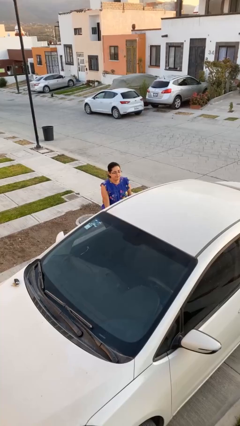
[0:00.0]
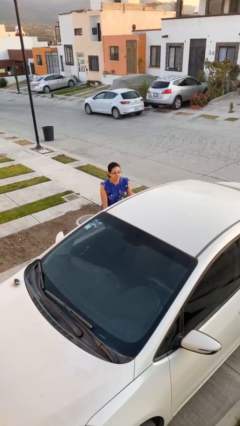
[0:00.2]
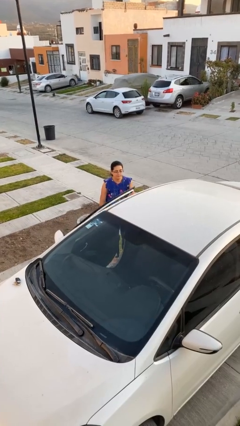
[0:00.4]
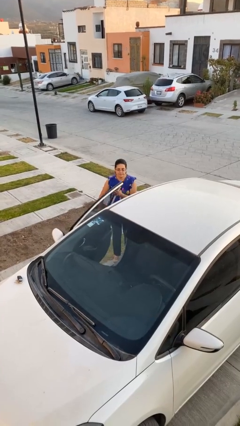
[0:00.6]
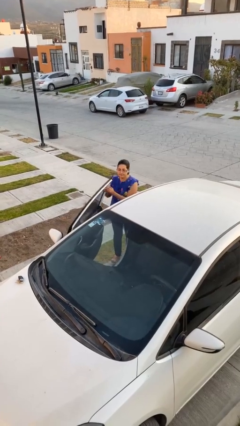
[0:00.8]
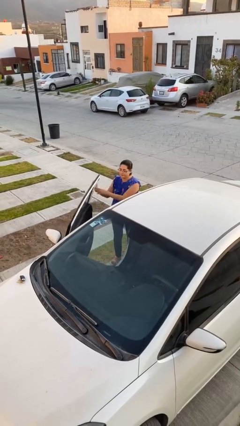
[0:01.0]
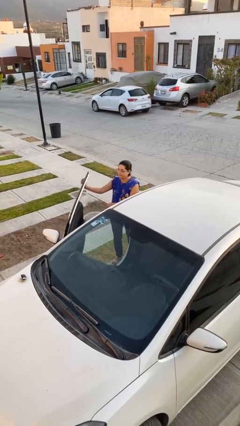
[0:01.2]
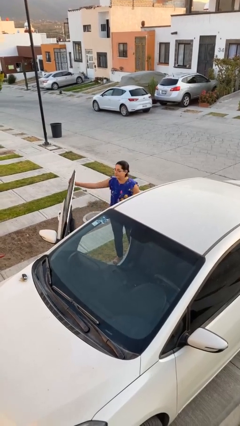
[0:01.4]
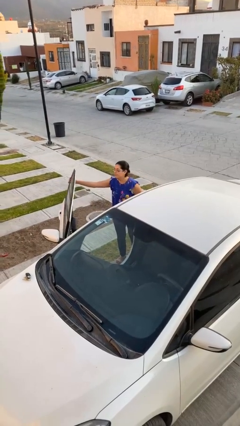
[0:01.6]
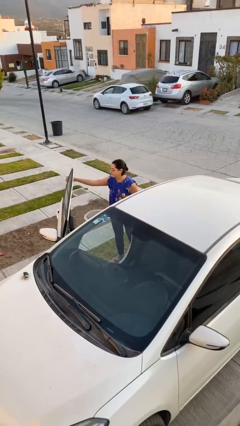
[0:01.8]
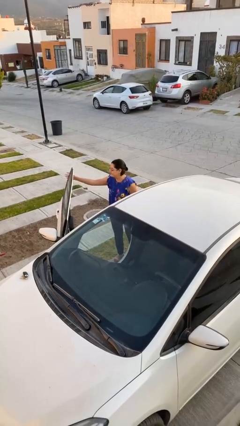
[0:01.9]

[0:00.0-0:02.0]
person opens car door

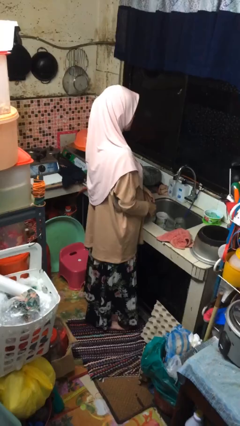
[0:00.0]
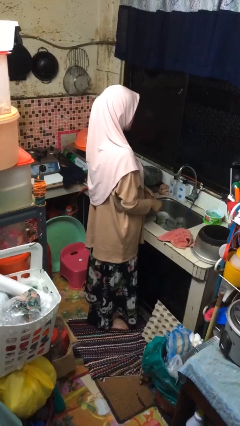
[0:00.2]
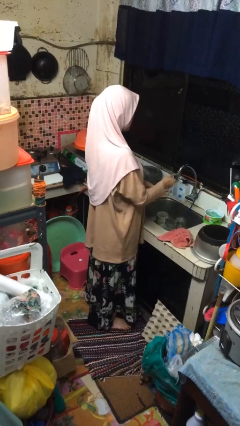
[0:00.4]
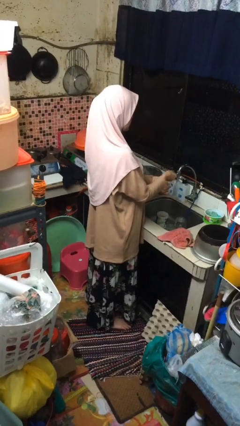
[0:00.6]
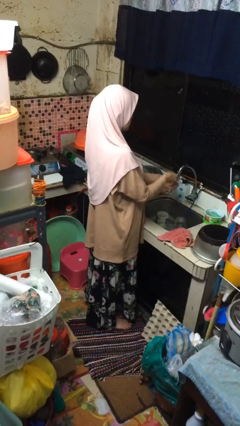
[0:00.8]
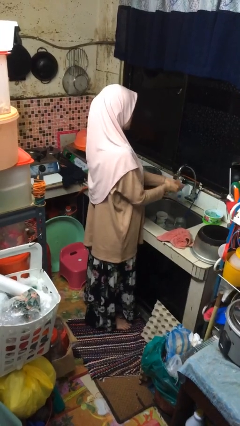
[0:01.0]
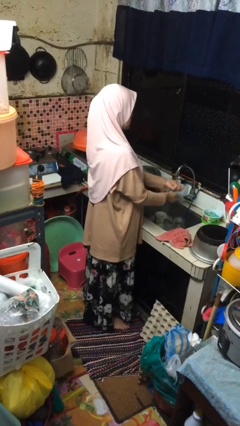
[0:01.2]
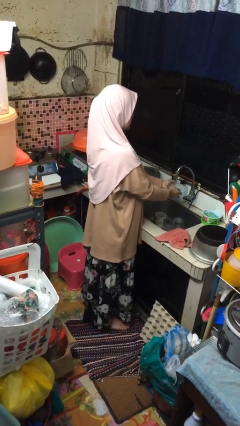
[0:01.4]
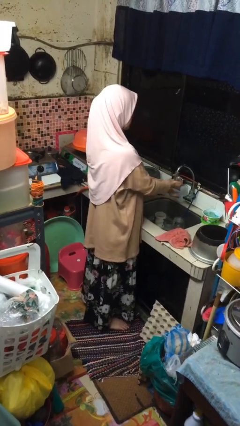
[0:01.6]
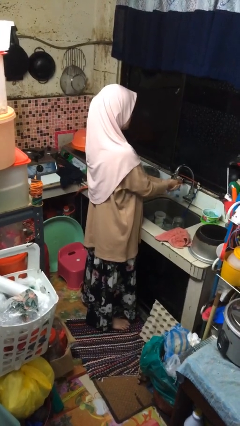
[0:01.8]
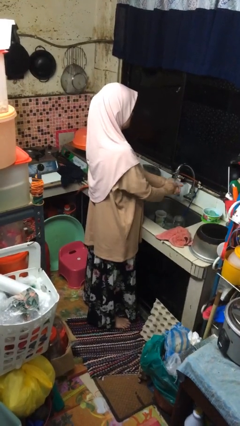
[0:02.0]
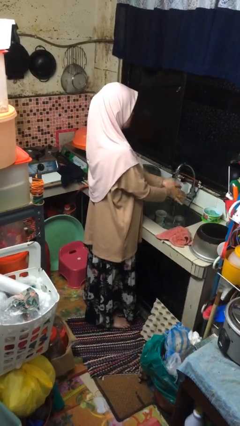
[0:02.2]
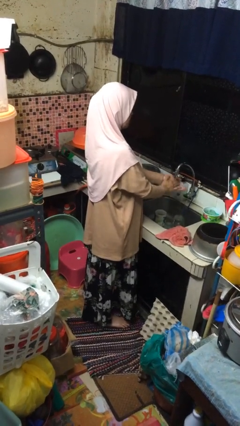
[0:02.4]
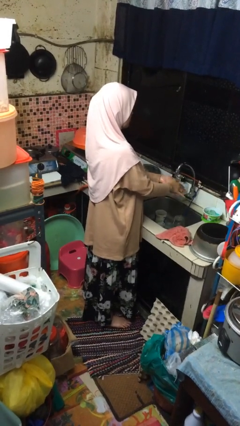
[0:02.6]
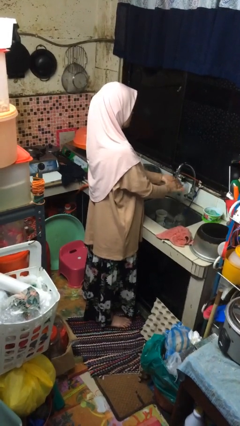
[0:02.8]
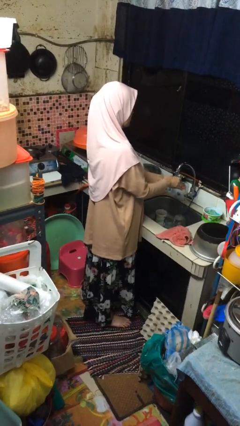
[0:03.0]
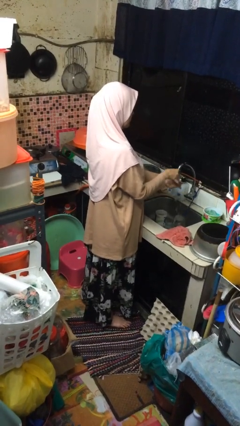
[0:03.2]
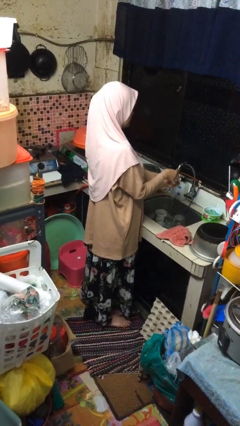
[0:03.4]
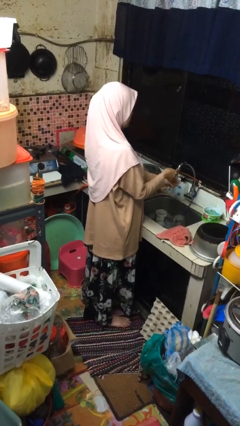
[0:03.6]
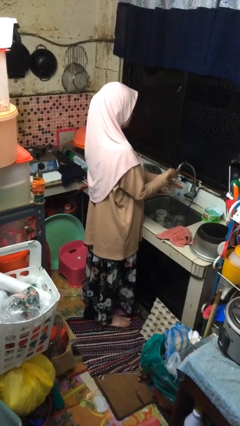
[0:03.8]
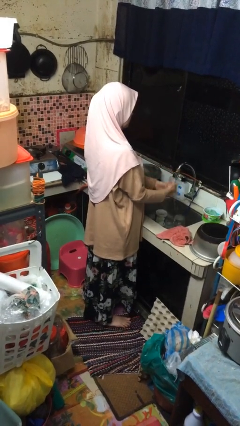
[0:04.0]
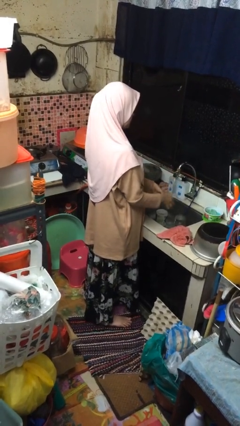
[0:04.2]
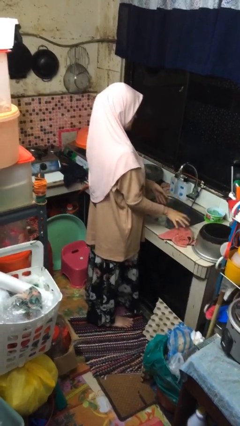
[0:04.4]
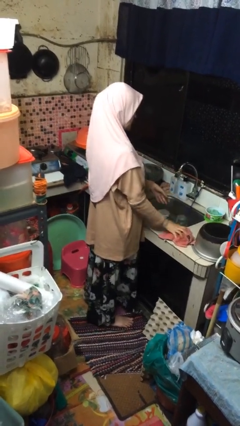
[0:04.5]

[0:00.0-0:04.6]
person washes hands

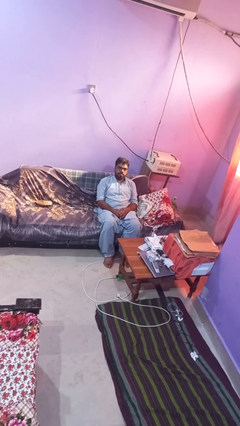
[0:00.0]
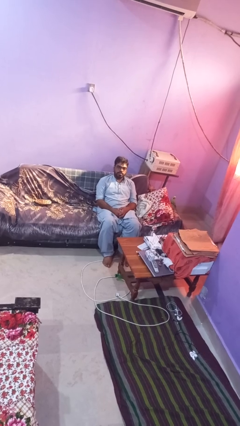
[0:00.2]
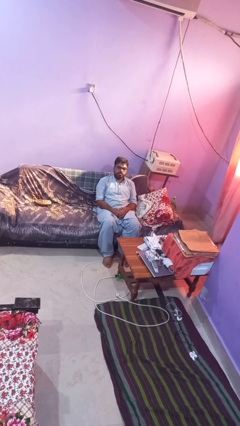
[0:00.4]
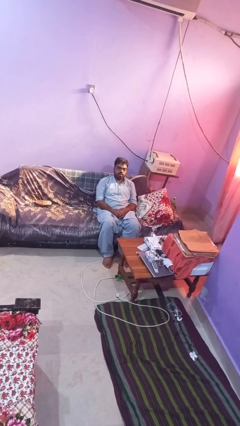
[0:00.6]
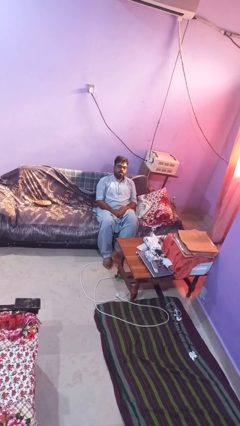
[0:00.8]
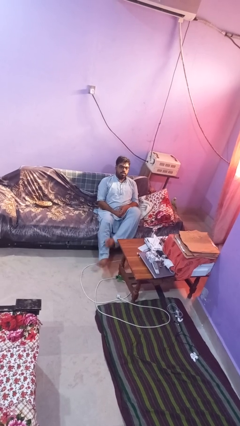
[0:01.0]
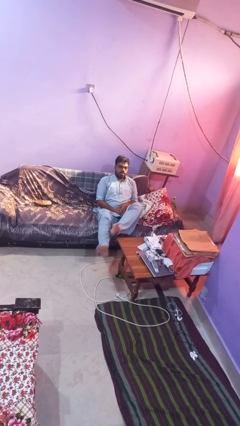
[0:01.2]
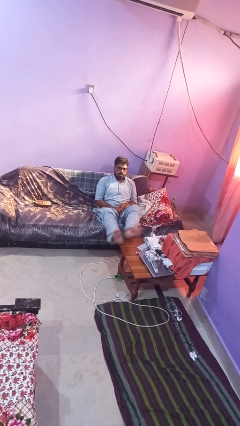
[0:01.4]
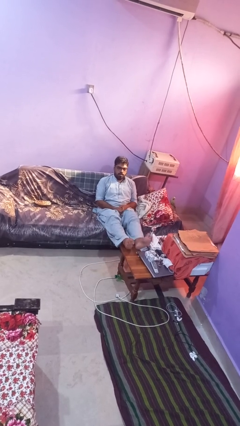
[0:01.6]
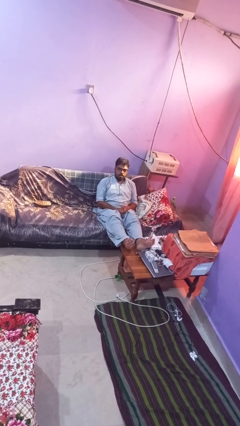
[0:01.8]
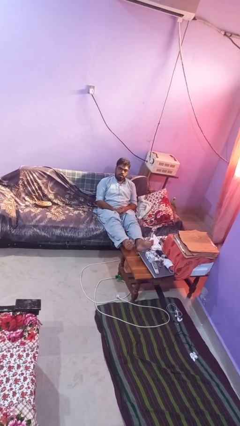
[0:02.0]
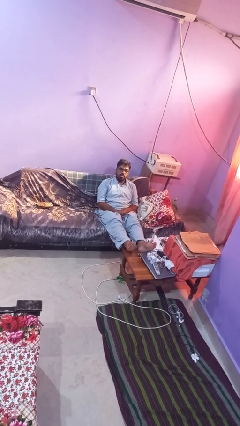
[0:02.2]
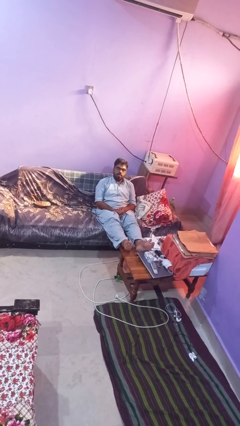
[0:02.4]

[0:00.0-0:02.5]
person puts feet up

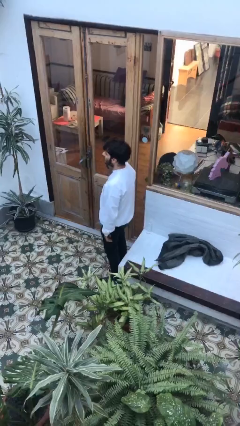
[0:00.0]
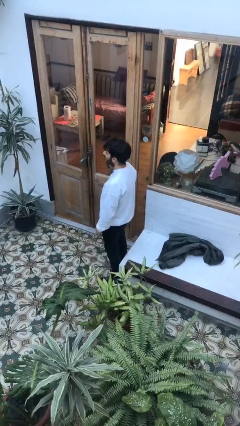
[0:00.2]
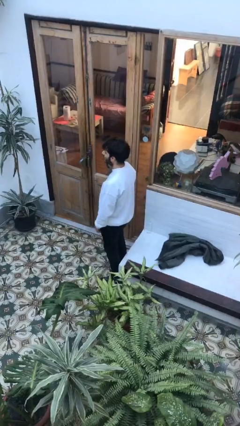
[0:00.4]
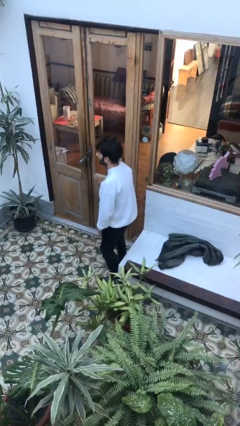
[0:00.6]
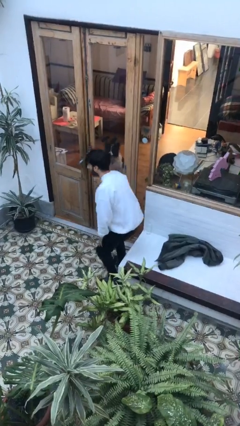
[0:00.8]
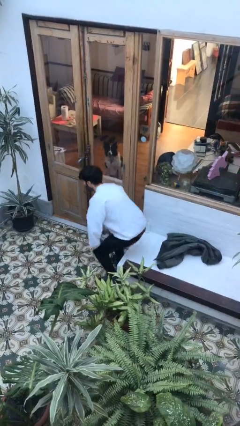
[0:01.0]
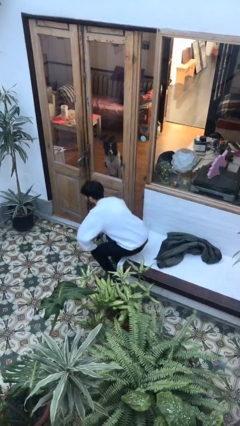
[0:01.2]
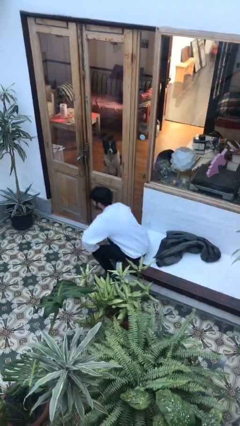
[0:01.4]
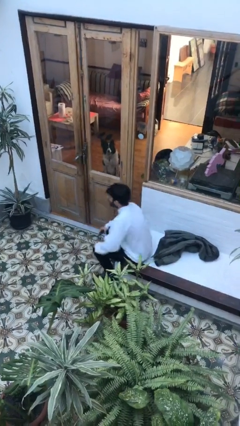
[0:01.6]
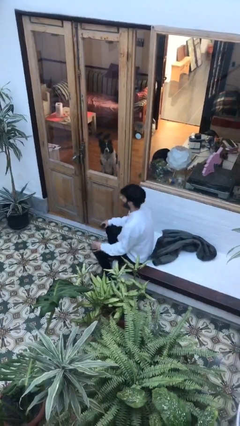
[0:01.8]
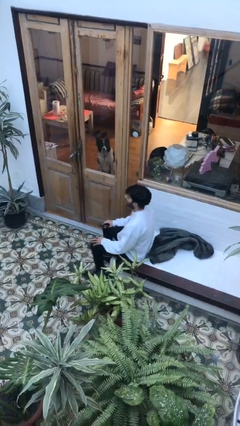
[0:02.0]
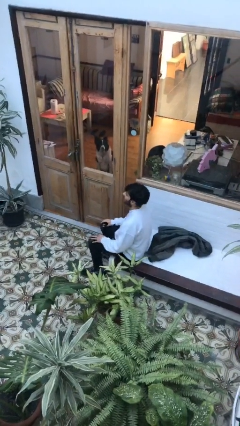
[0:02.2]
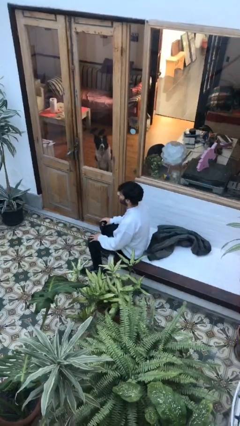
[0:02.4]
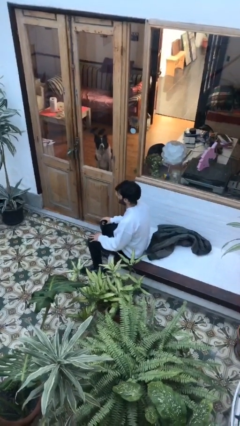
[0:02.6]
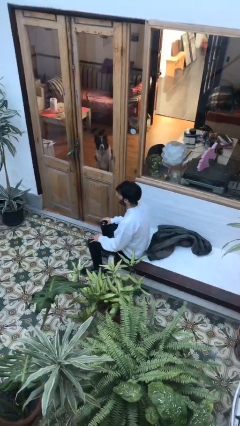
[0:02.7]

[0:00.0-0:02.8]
person sits down

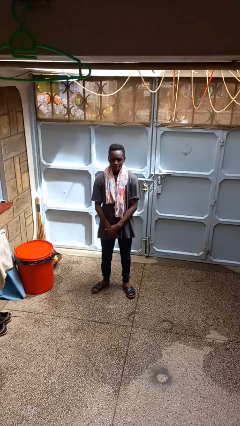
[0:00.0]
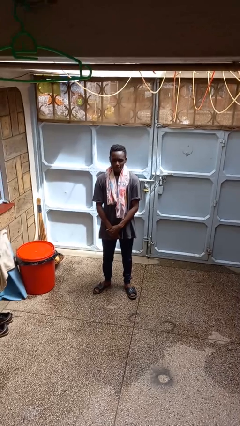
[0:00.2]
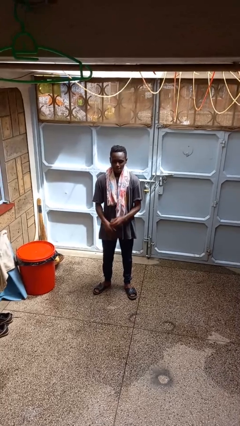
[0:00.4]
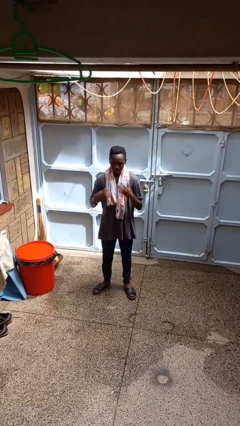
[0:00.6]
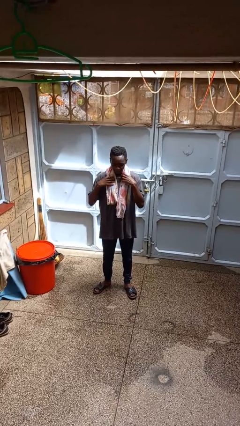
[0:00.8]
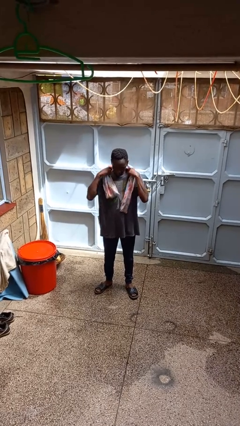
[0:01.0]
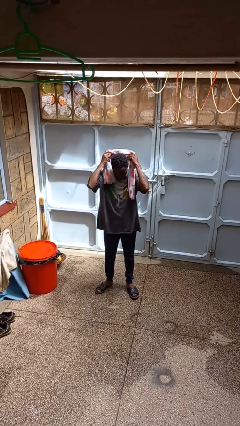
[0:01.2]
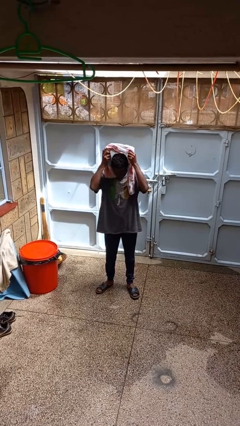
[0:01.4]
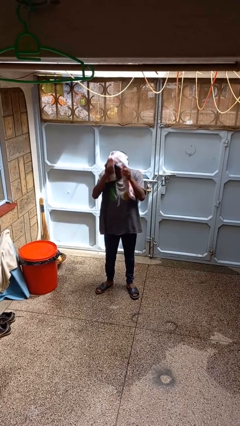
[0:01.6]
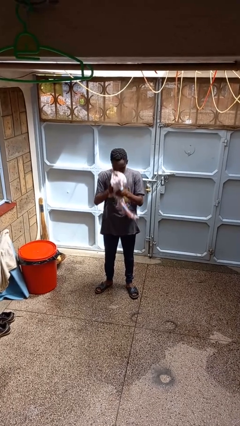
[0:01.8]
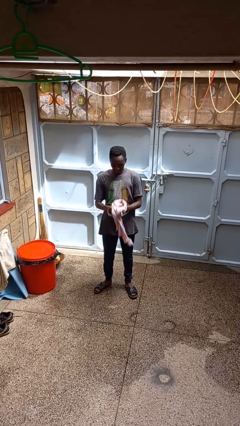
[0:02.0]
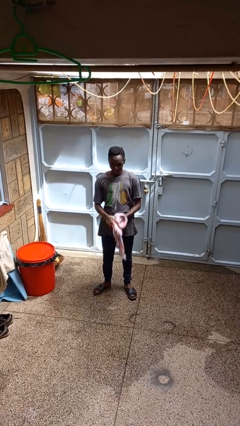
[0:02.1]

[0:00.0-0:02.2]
person takes off scarf

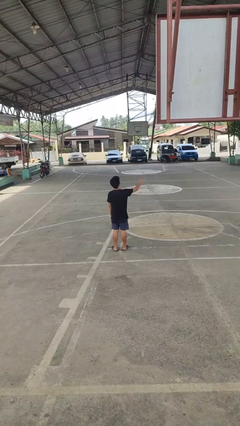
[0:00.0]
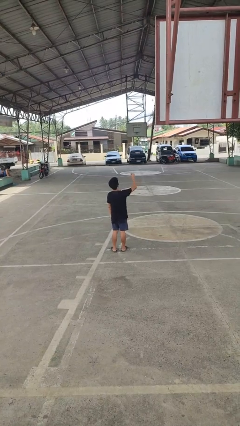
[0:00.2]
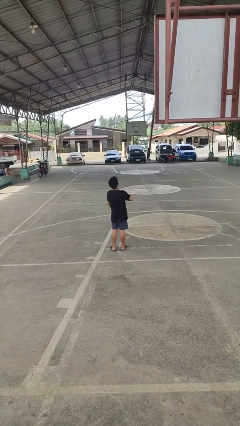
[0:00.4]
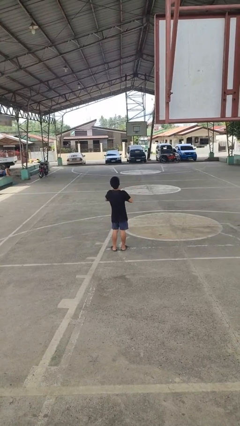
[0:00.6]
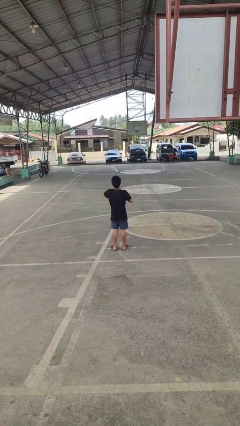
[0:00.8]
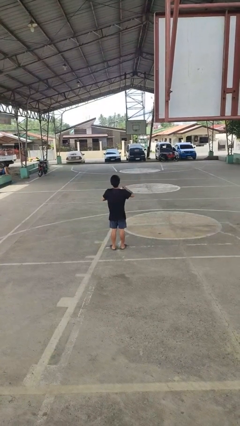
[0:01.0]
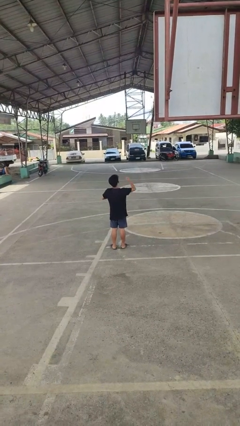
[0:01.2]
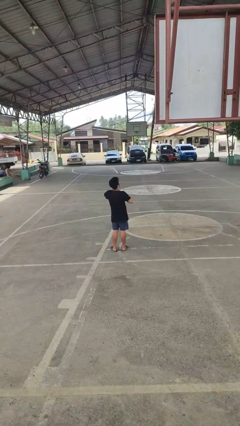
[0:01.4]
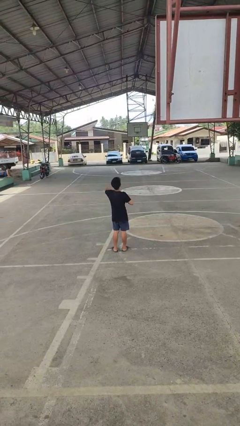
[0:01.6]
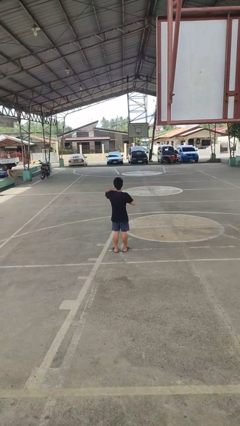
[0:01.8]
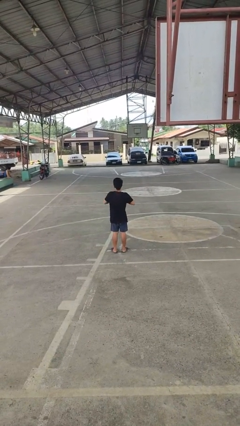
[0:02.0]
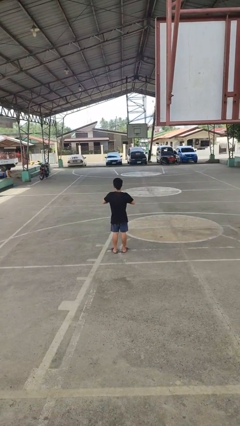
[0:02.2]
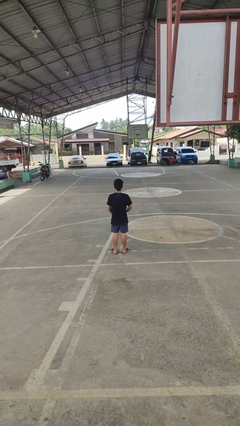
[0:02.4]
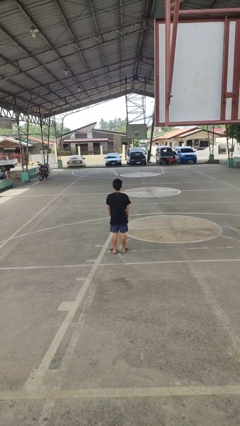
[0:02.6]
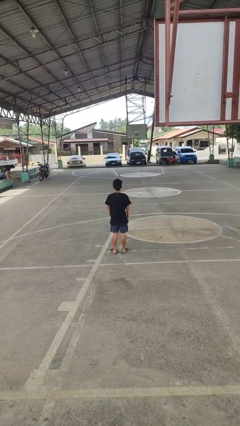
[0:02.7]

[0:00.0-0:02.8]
person drums on chest

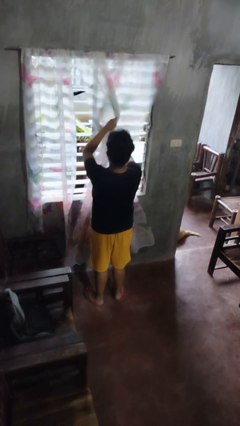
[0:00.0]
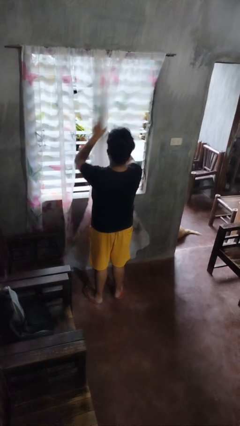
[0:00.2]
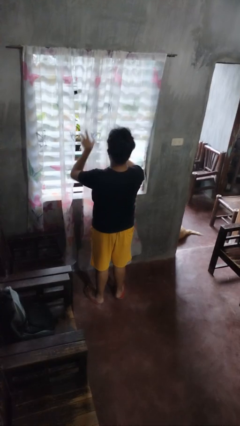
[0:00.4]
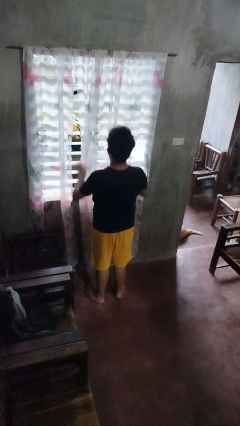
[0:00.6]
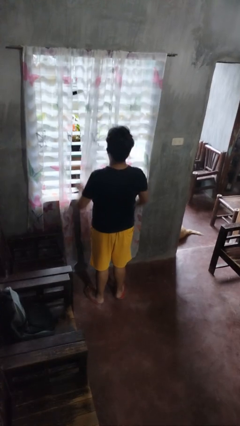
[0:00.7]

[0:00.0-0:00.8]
person closes curtains
